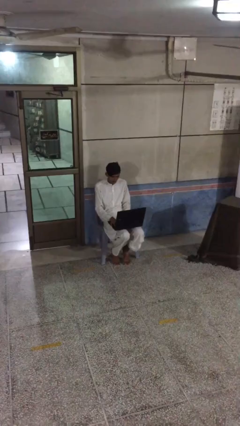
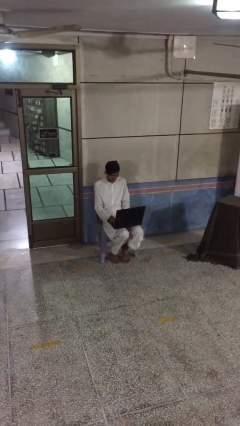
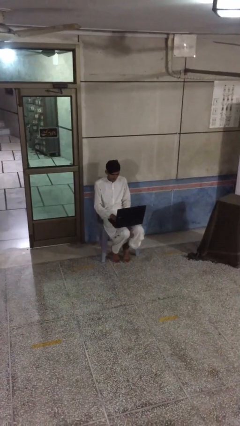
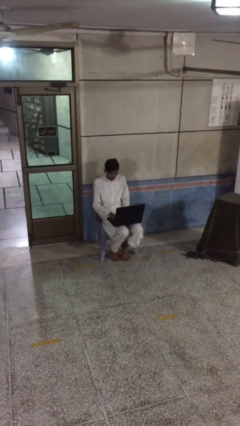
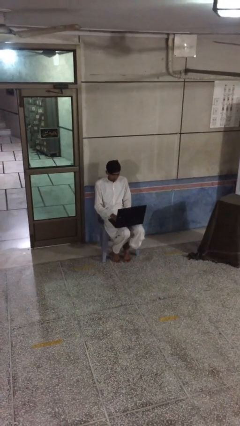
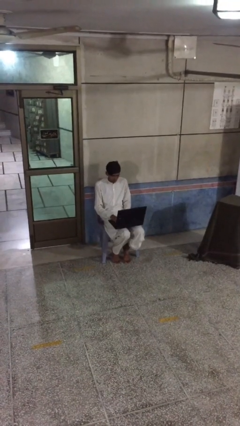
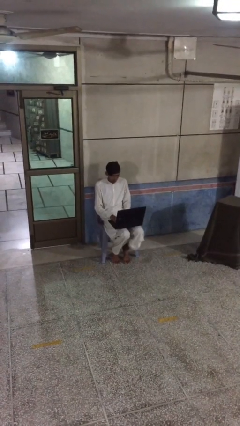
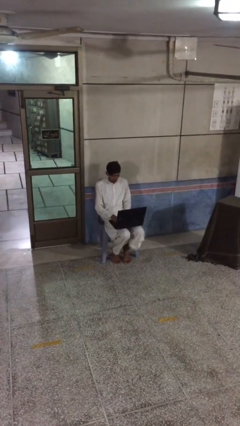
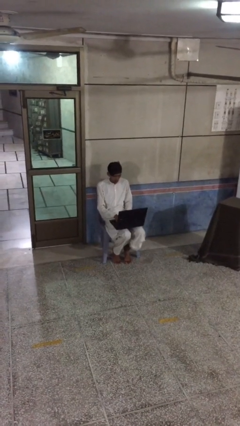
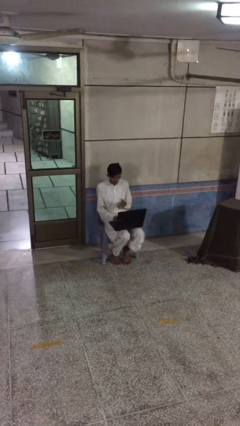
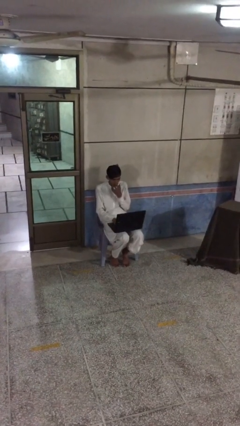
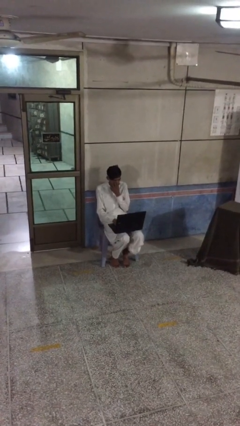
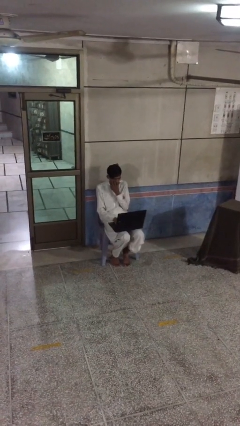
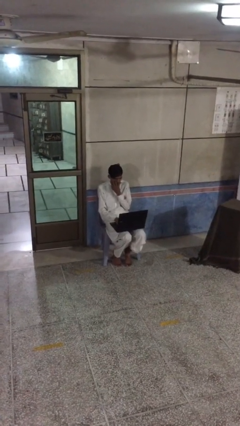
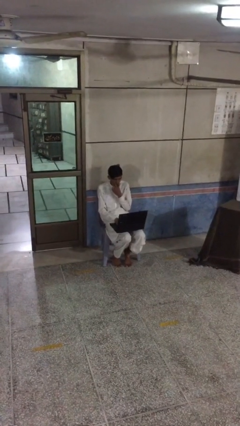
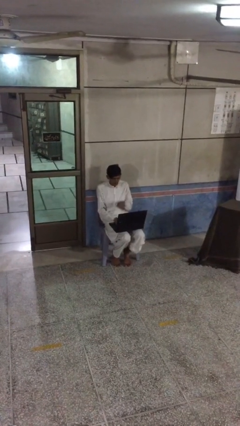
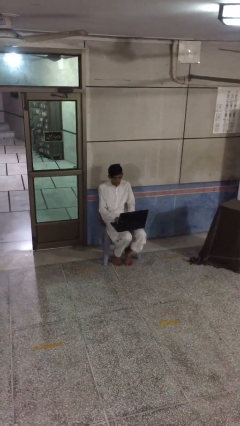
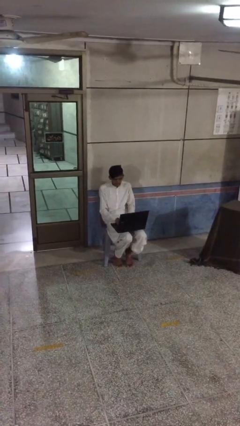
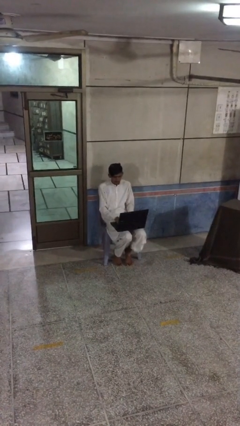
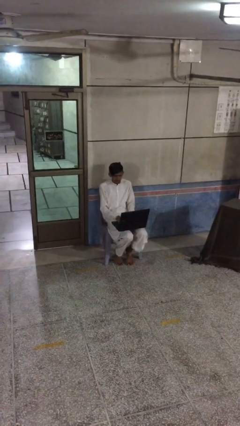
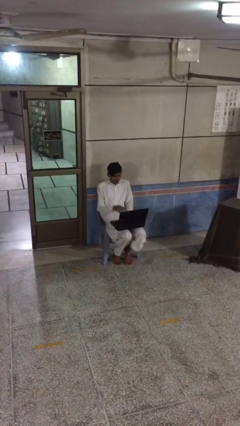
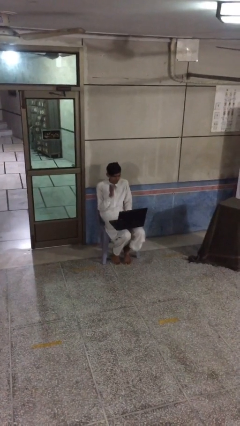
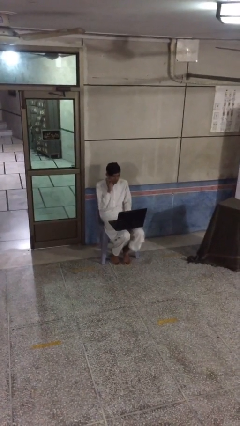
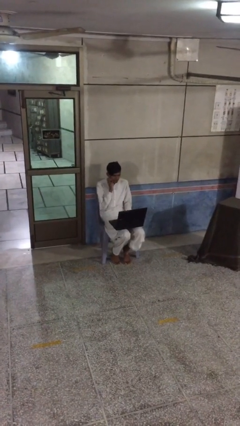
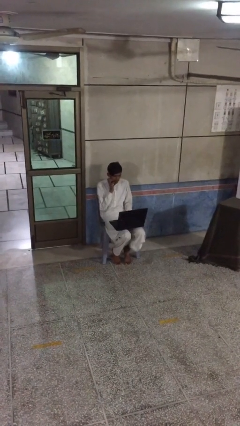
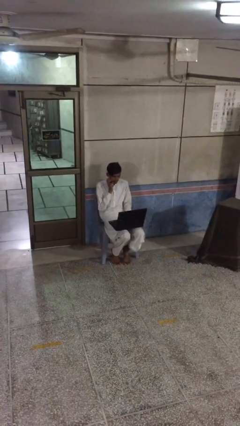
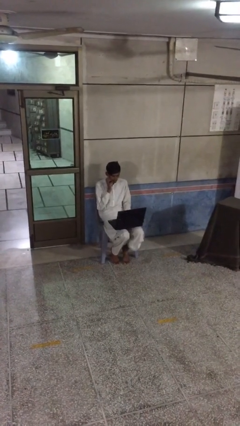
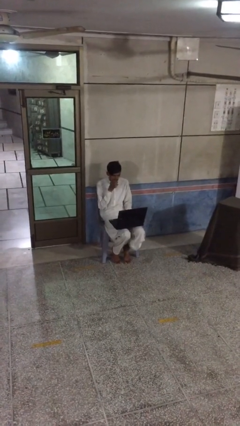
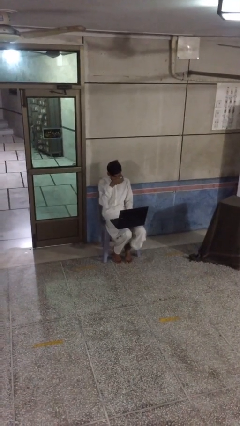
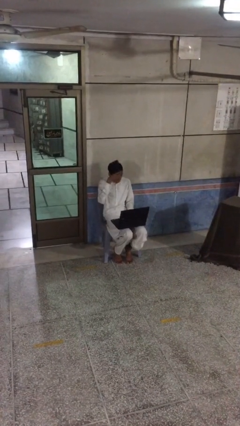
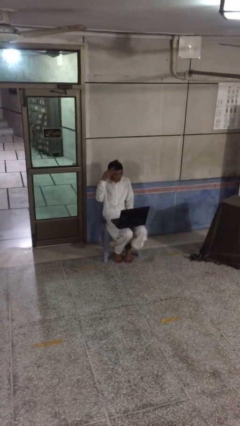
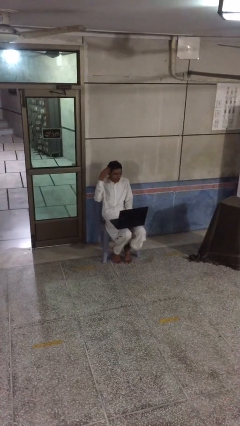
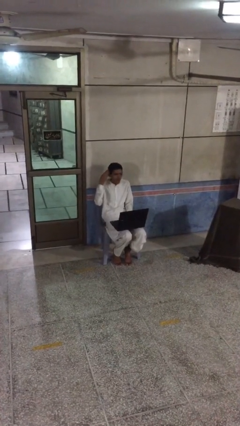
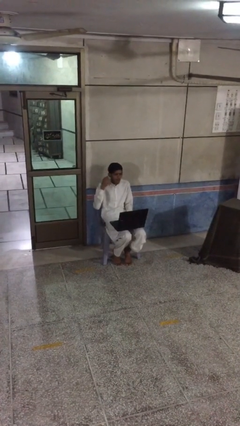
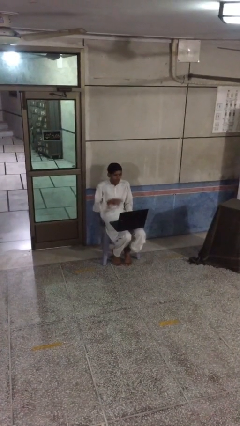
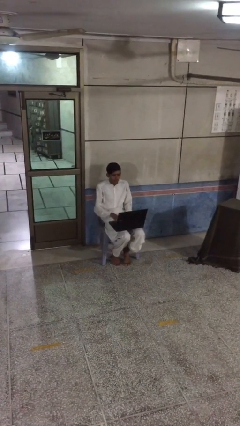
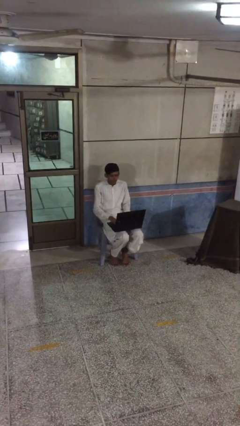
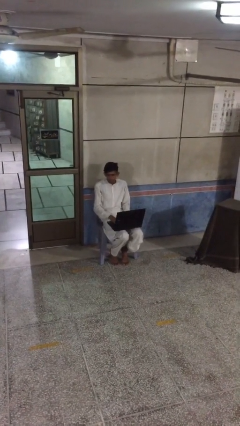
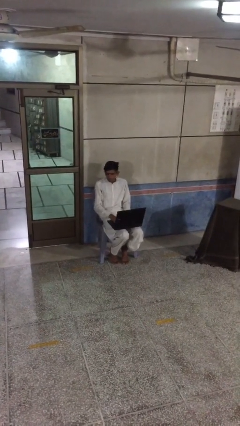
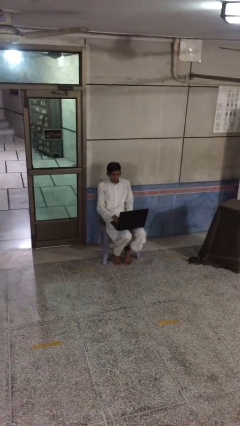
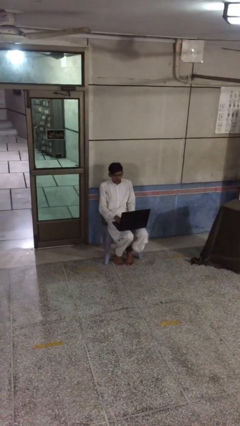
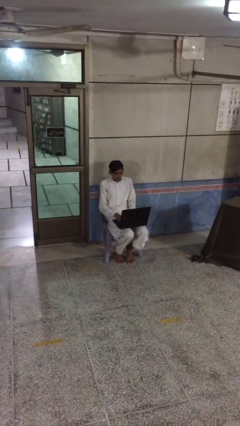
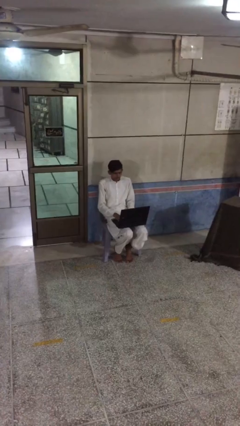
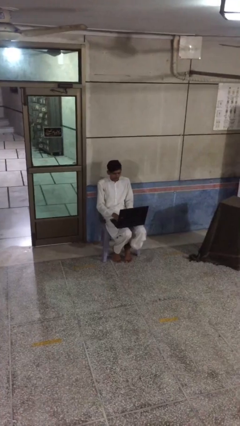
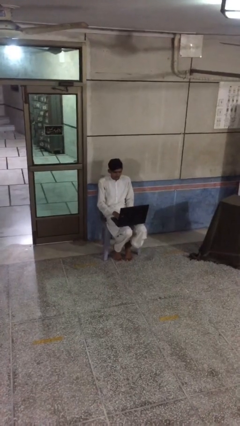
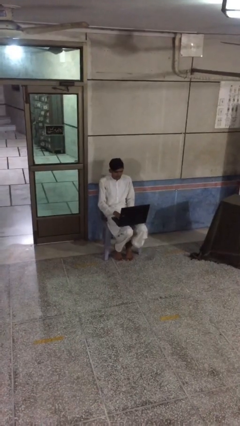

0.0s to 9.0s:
person interacts with laptop

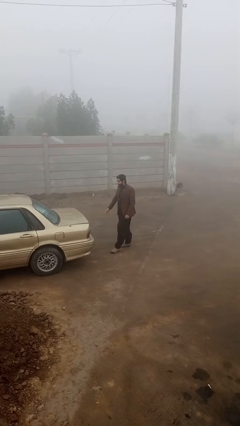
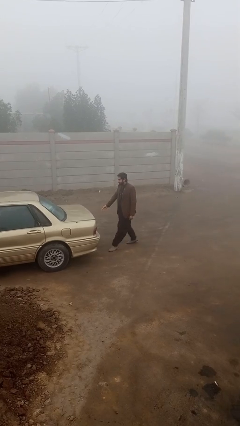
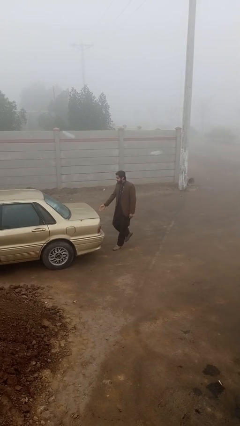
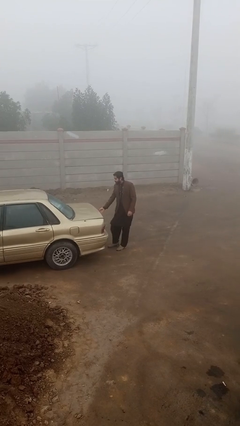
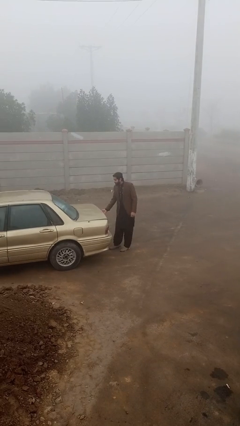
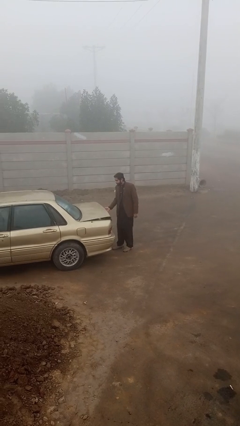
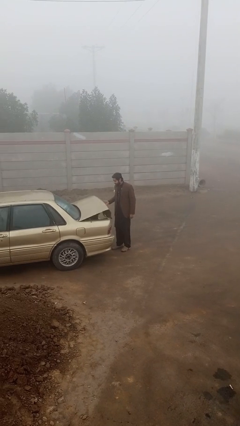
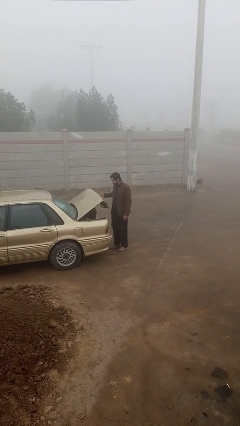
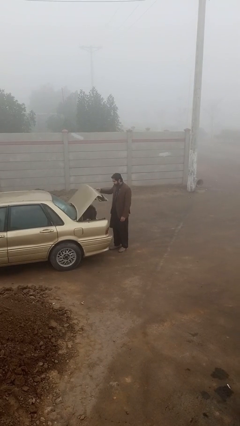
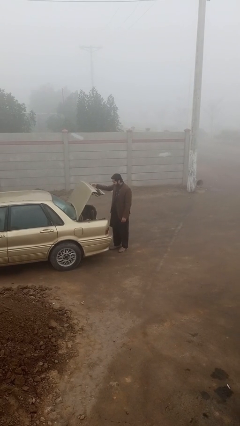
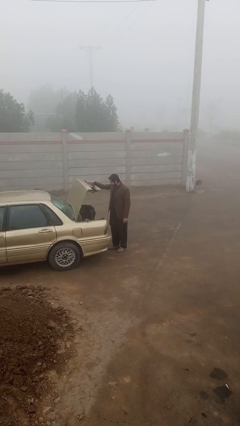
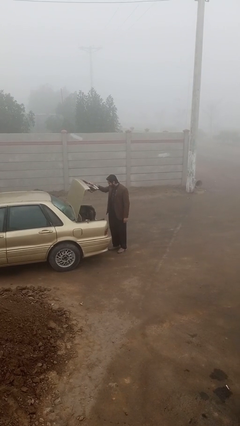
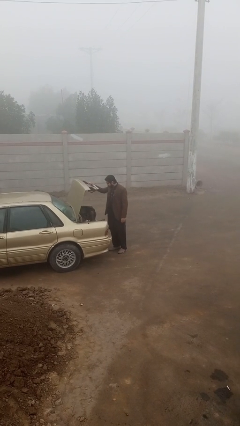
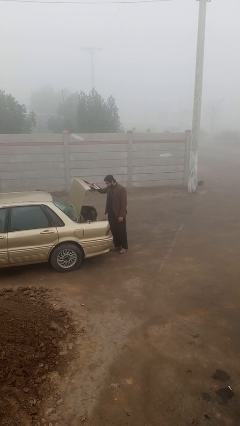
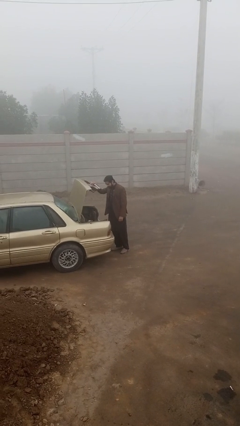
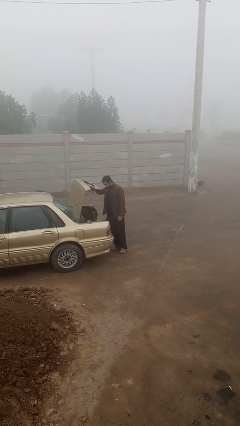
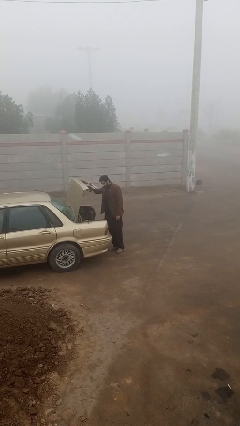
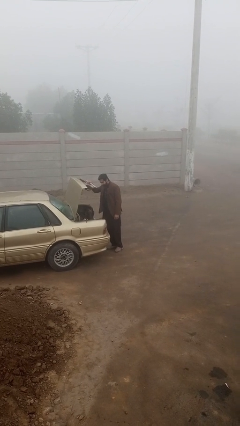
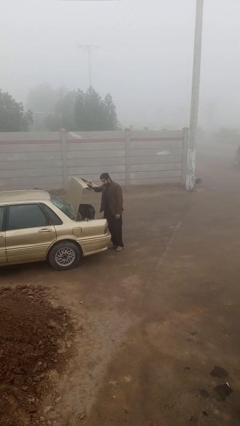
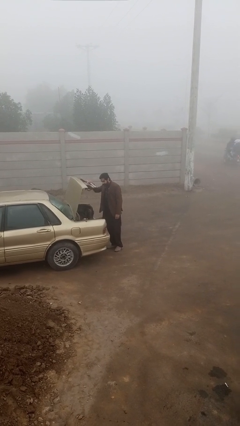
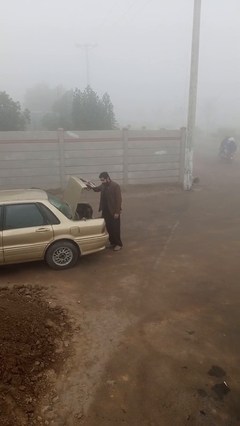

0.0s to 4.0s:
person opens car trunk

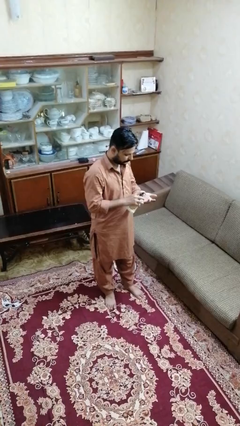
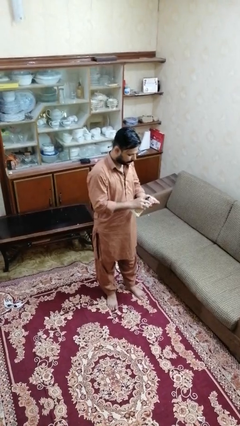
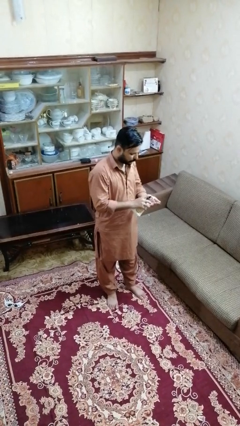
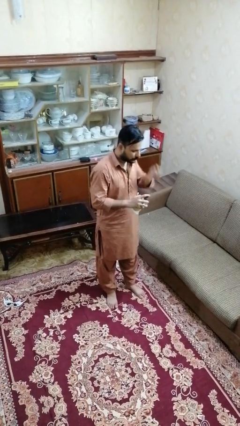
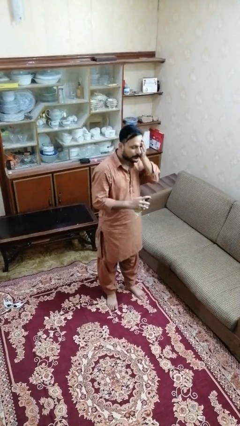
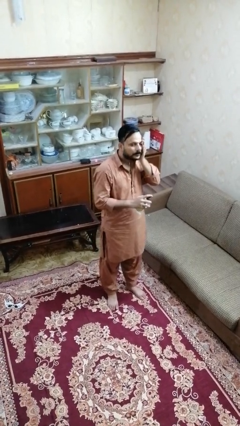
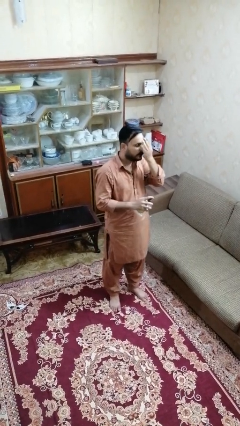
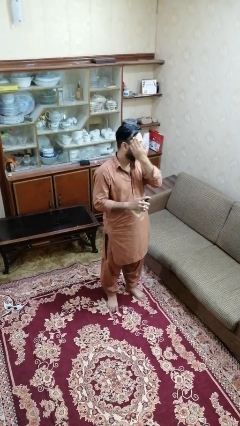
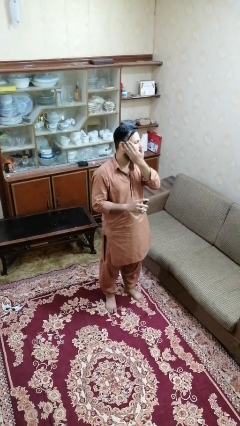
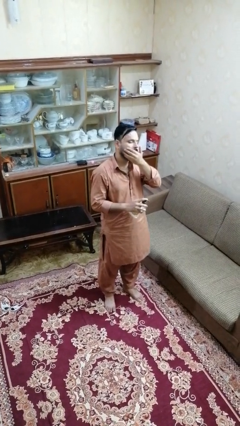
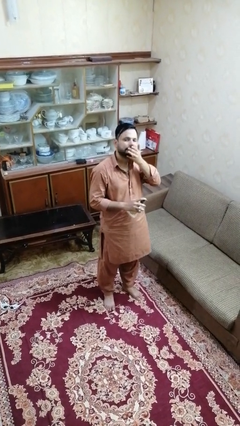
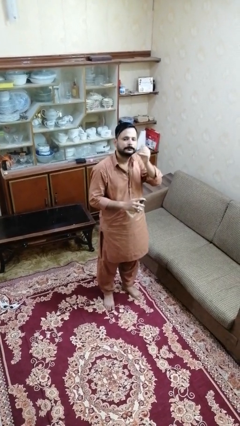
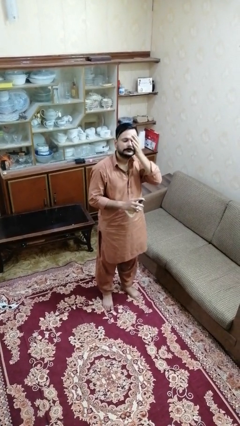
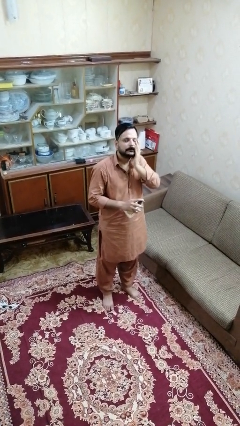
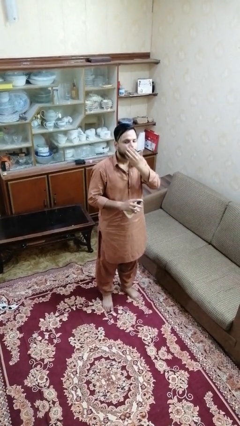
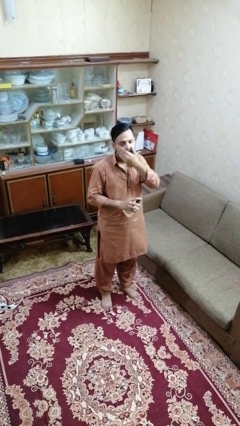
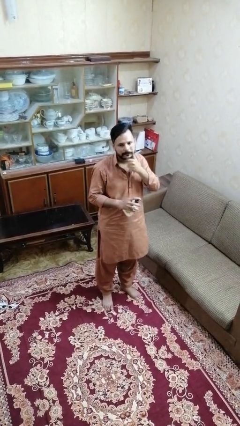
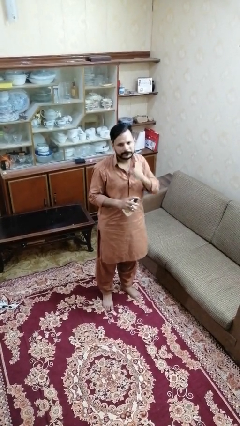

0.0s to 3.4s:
person applies facial moisturizer

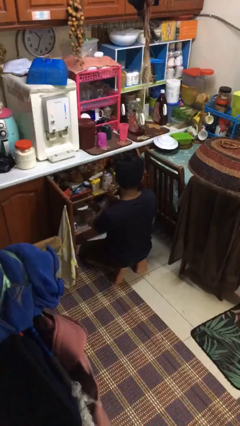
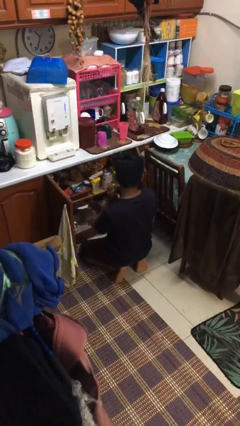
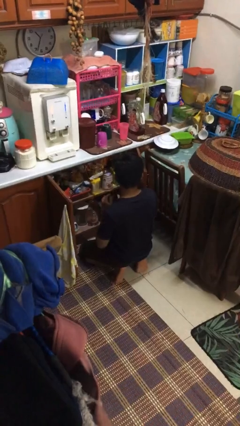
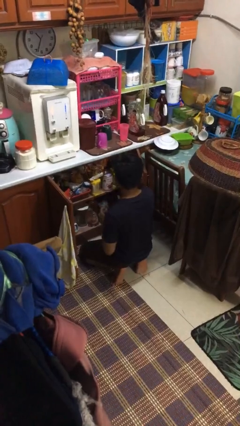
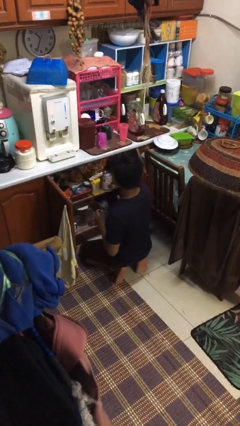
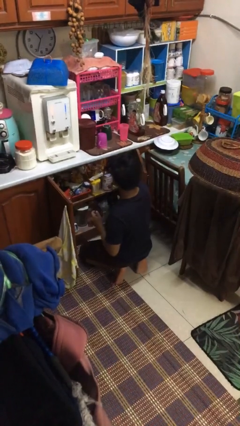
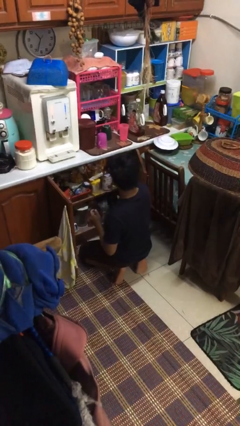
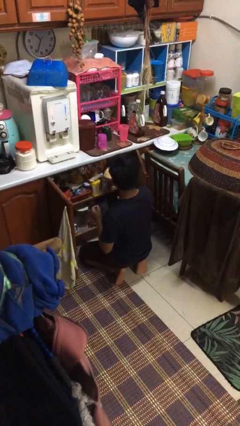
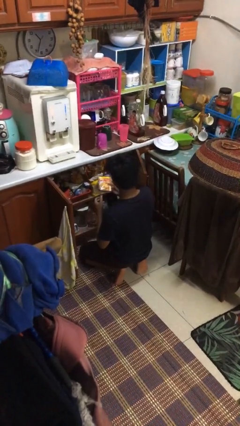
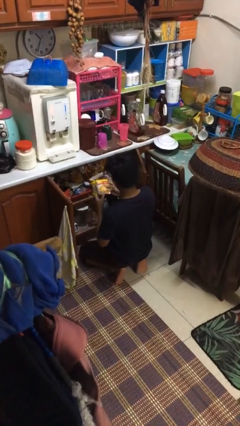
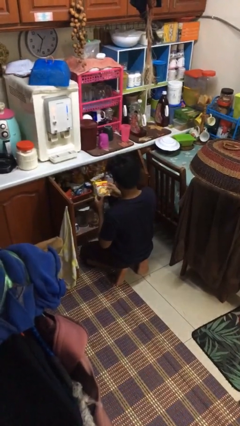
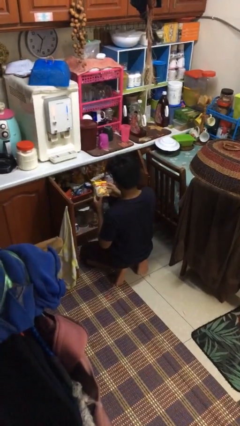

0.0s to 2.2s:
person takes object from cabinet
